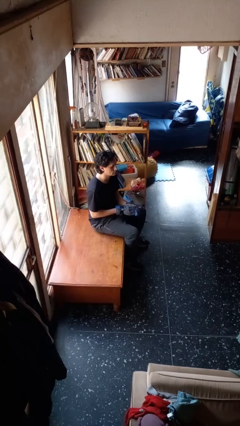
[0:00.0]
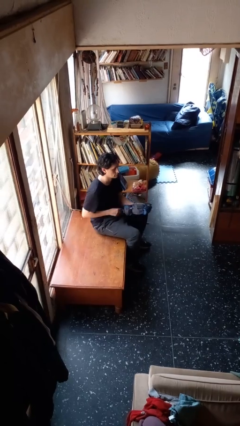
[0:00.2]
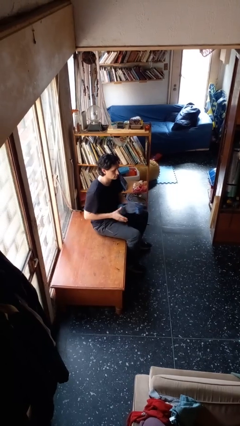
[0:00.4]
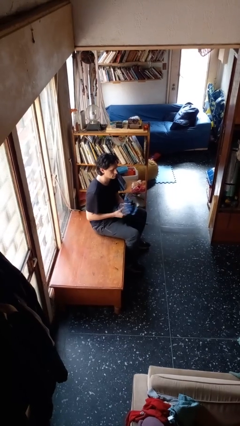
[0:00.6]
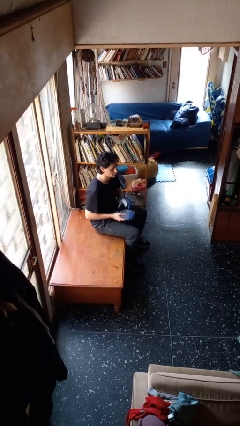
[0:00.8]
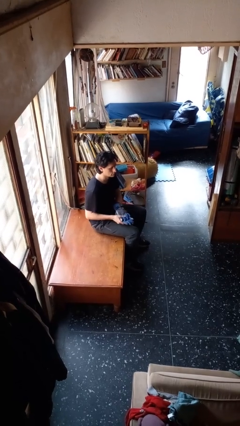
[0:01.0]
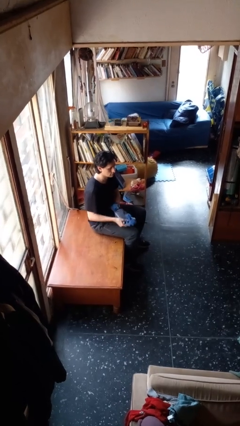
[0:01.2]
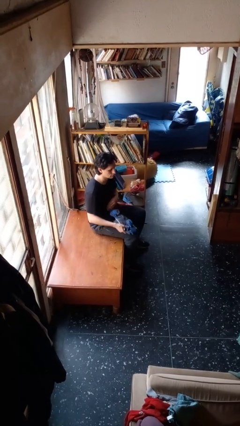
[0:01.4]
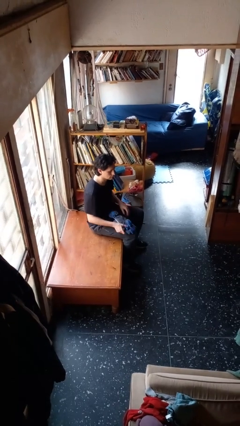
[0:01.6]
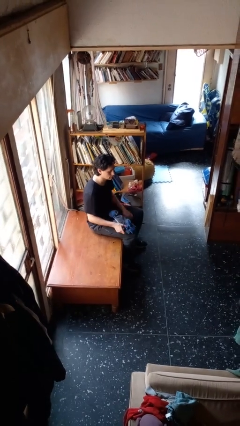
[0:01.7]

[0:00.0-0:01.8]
person takes off gloves

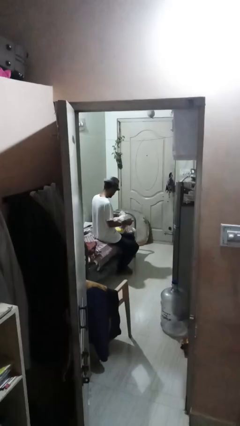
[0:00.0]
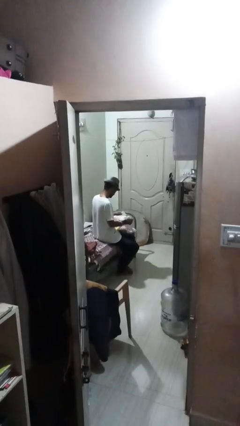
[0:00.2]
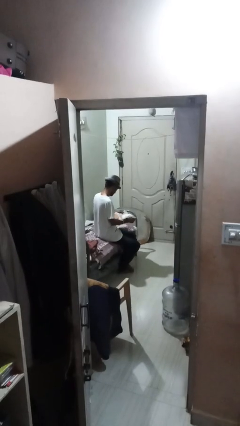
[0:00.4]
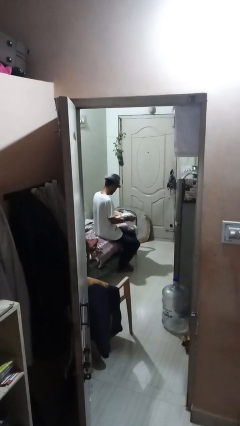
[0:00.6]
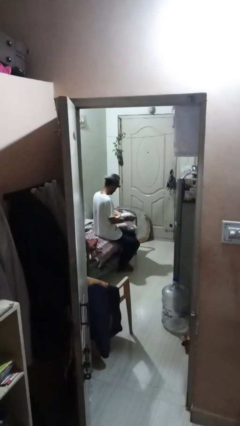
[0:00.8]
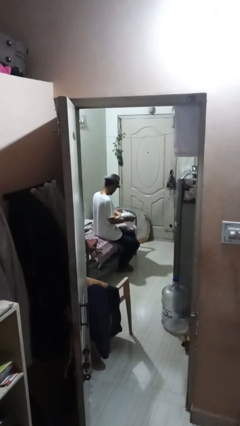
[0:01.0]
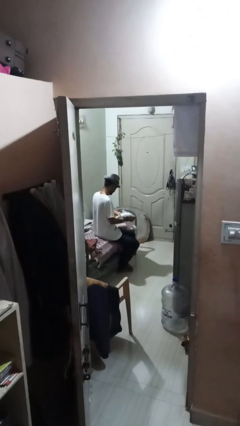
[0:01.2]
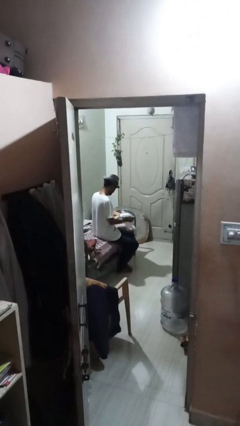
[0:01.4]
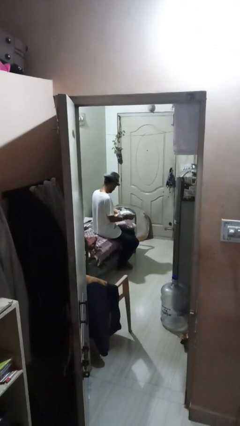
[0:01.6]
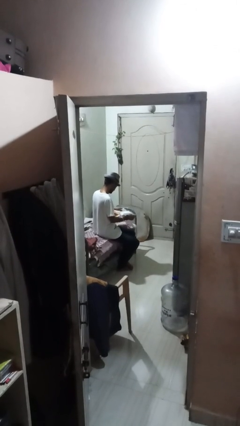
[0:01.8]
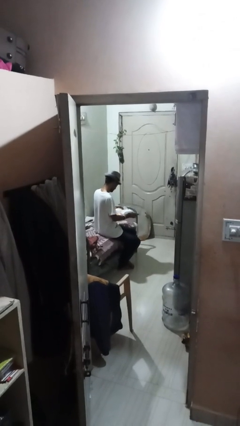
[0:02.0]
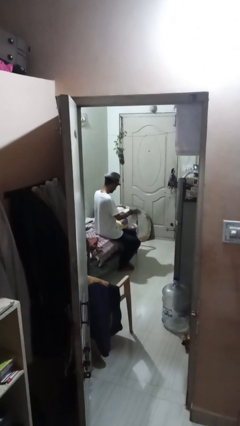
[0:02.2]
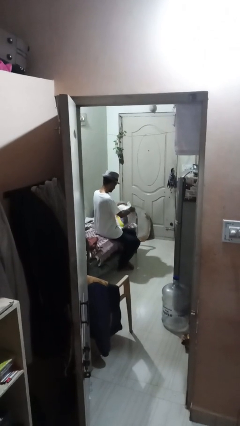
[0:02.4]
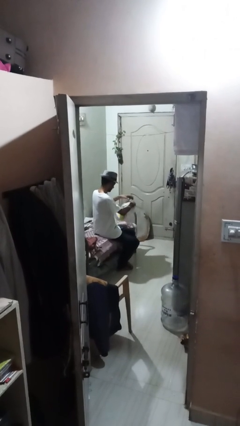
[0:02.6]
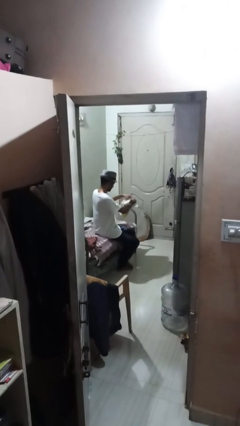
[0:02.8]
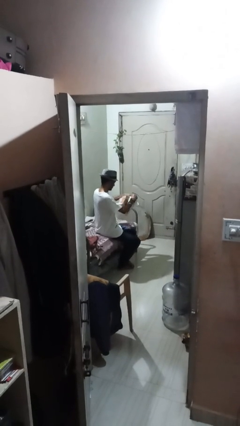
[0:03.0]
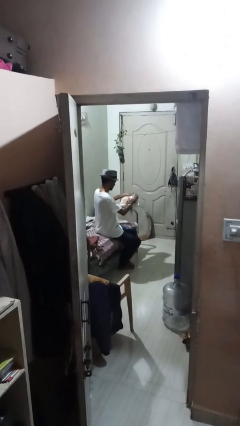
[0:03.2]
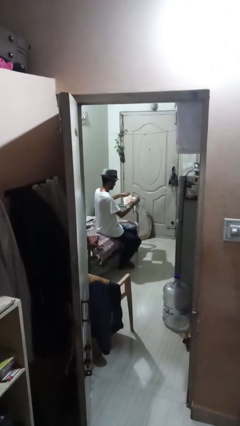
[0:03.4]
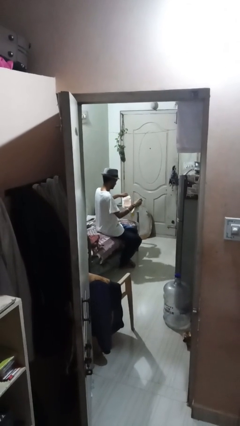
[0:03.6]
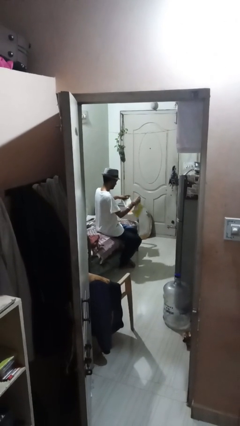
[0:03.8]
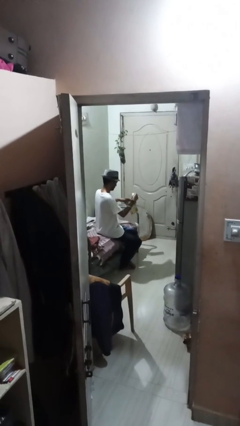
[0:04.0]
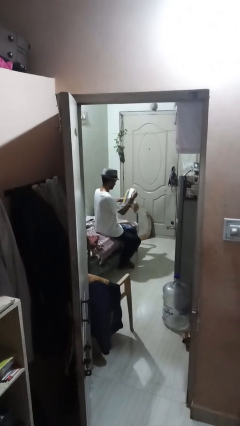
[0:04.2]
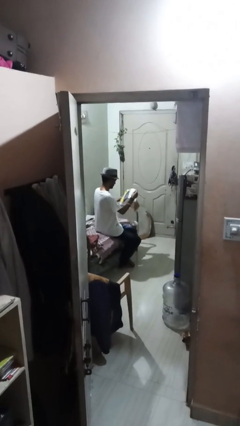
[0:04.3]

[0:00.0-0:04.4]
person tears paper

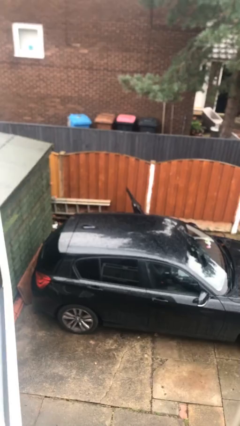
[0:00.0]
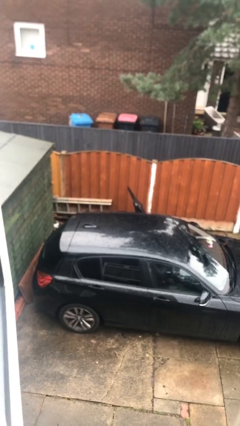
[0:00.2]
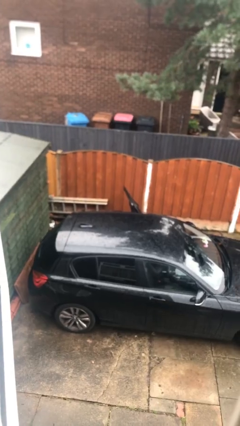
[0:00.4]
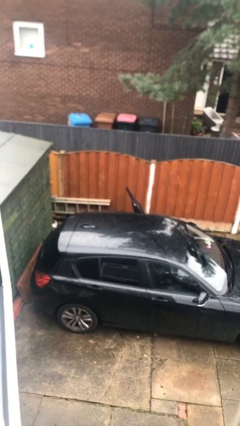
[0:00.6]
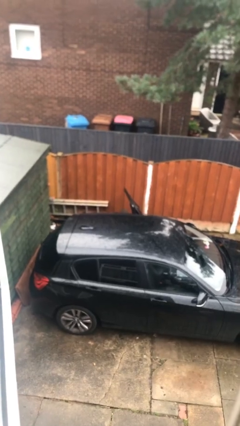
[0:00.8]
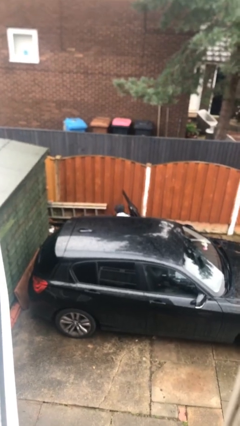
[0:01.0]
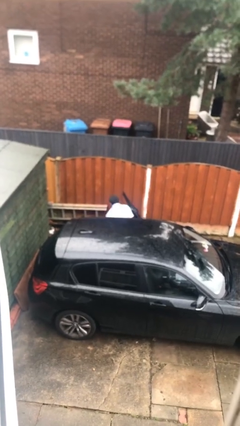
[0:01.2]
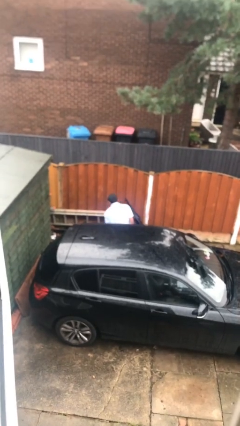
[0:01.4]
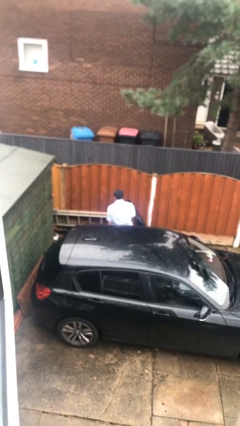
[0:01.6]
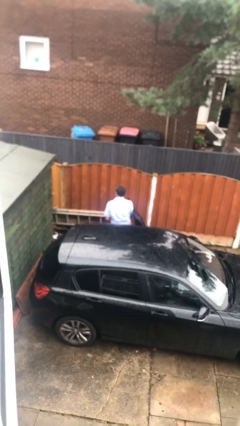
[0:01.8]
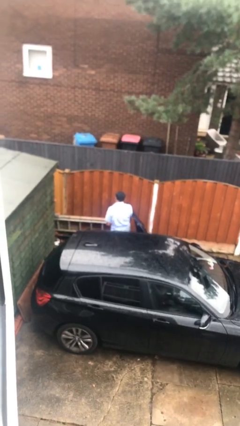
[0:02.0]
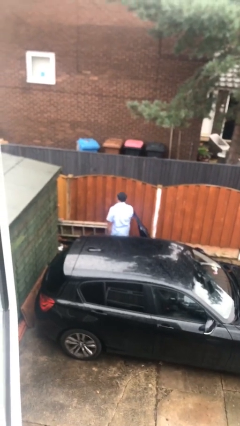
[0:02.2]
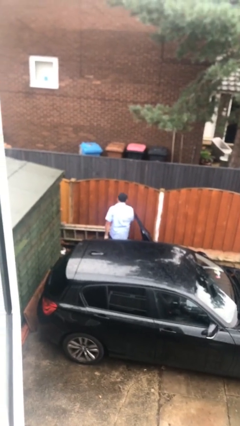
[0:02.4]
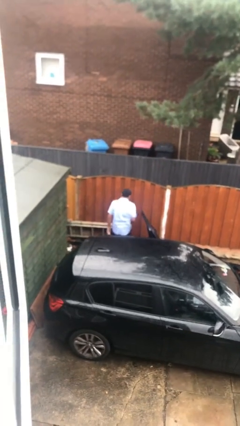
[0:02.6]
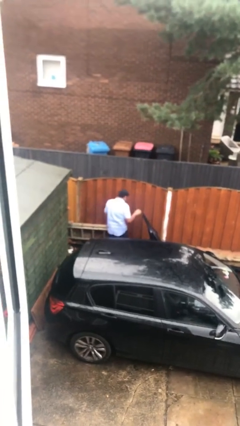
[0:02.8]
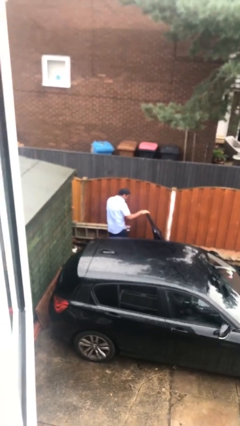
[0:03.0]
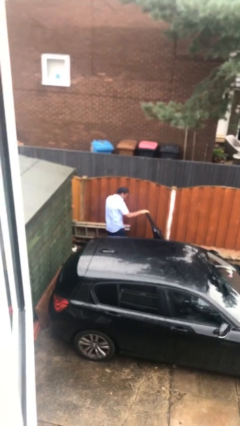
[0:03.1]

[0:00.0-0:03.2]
person exits car

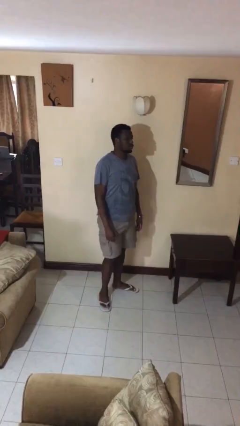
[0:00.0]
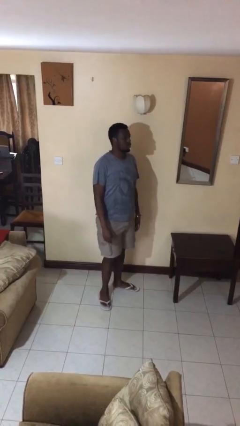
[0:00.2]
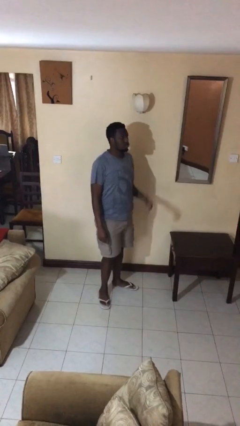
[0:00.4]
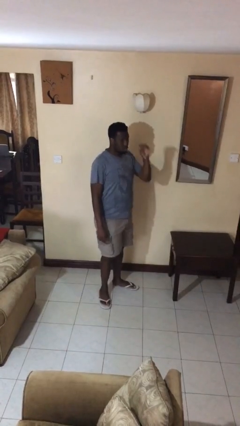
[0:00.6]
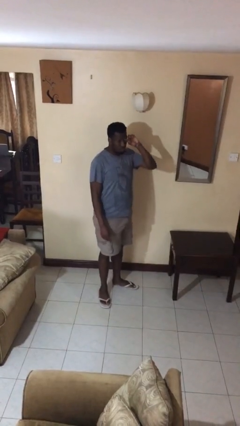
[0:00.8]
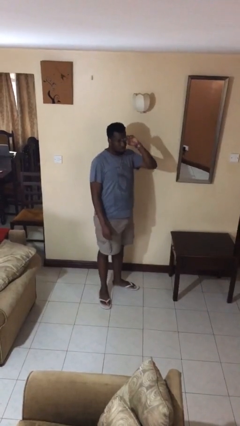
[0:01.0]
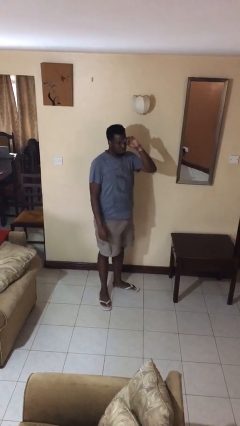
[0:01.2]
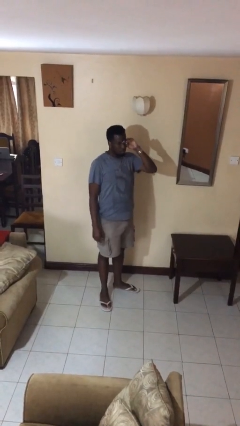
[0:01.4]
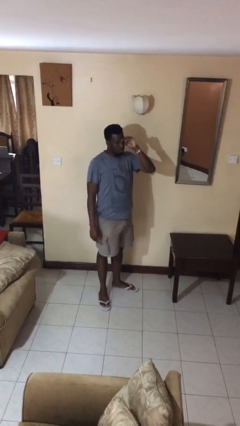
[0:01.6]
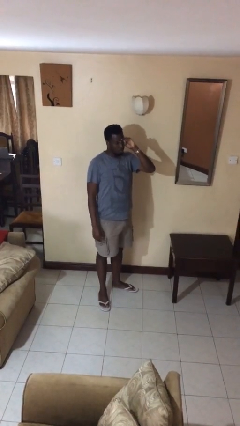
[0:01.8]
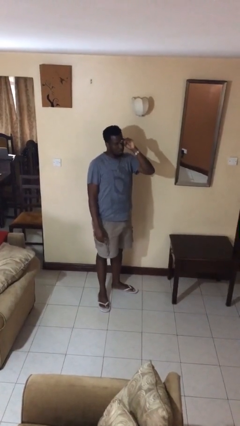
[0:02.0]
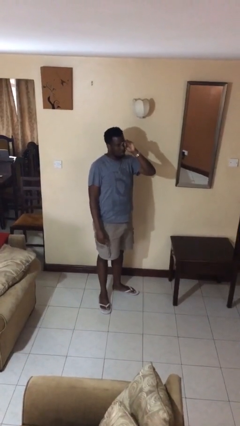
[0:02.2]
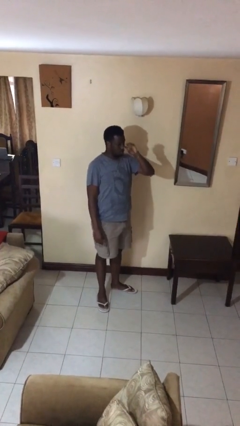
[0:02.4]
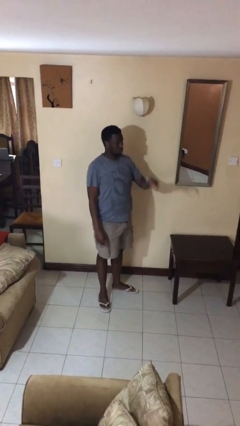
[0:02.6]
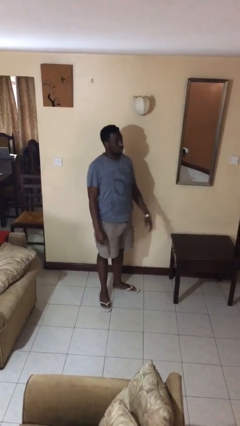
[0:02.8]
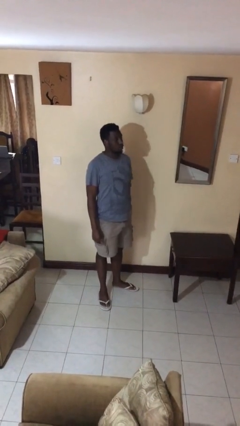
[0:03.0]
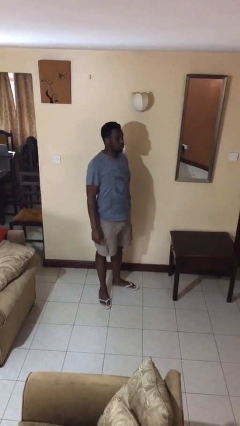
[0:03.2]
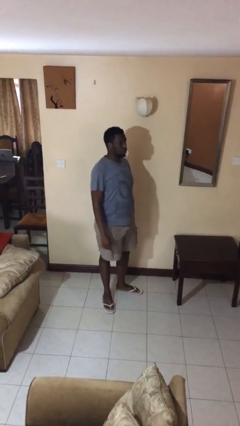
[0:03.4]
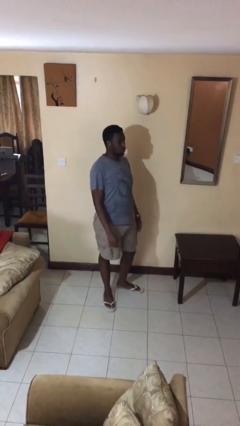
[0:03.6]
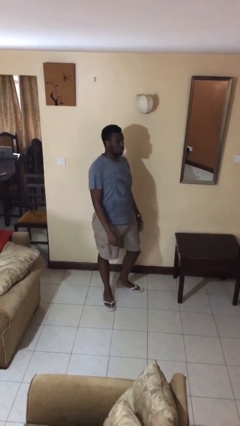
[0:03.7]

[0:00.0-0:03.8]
person rubs eyes

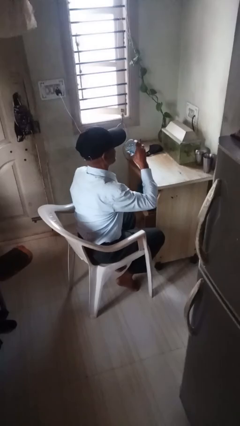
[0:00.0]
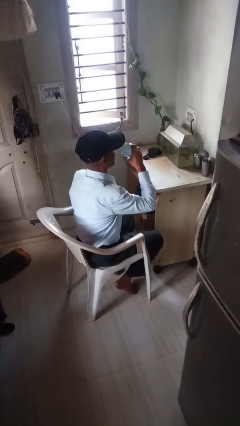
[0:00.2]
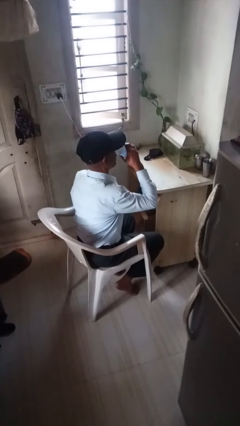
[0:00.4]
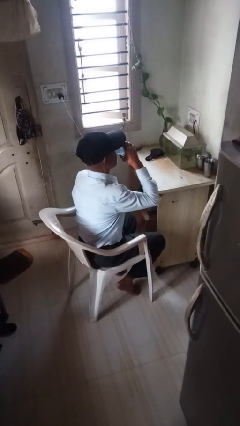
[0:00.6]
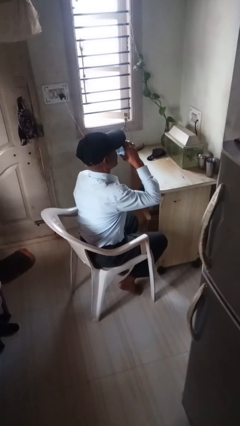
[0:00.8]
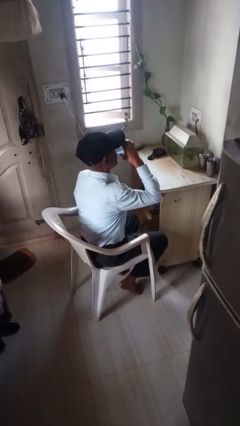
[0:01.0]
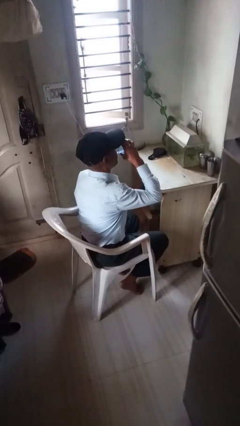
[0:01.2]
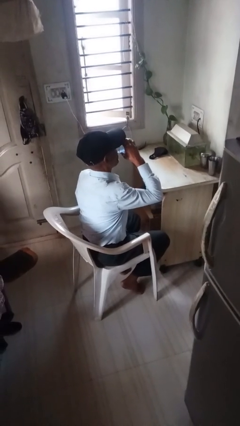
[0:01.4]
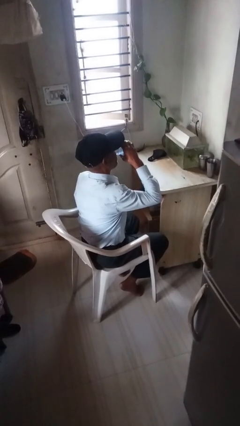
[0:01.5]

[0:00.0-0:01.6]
person drinks from shotglass

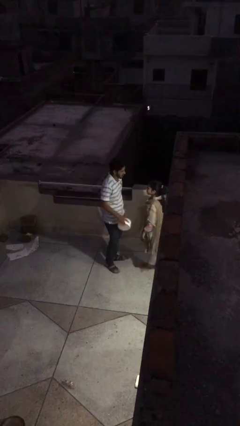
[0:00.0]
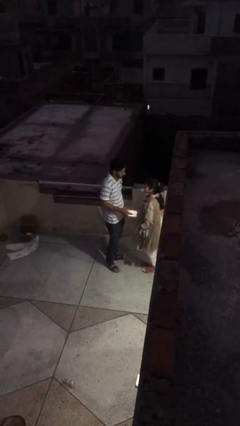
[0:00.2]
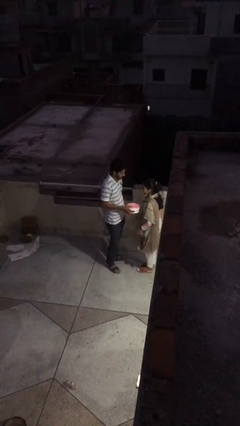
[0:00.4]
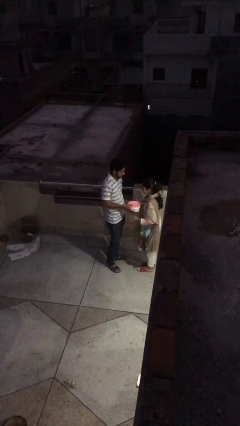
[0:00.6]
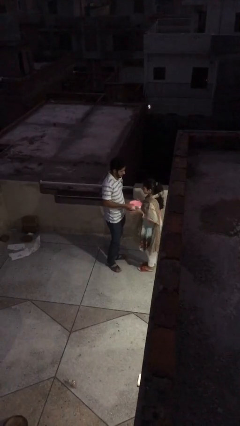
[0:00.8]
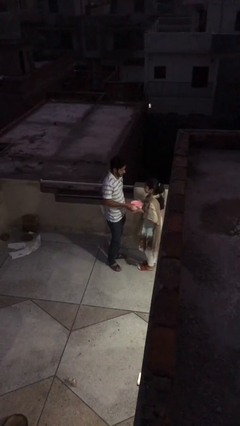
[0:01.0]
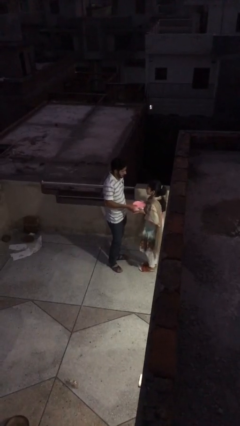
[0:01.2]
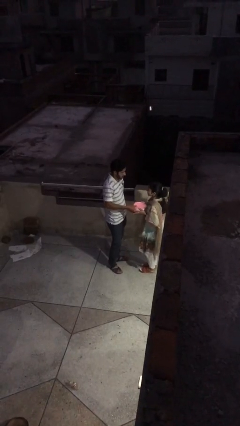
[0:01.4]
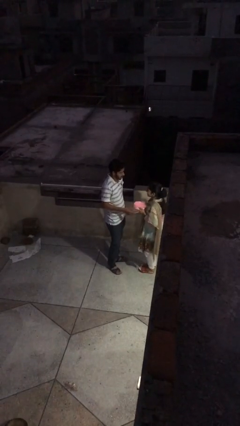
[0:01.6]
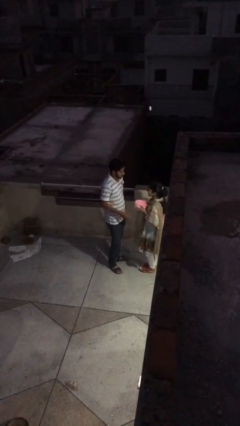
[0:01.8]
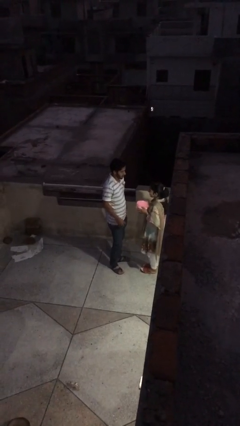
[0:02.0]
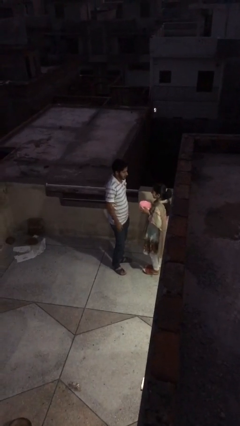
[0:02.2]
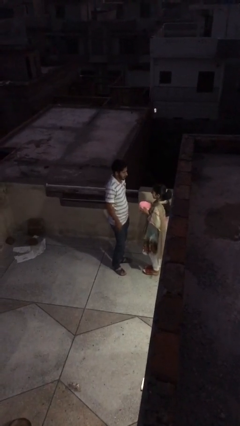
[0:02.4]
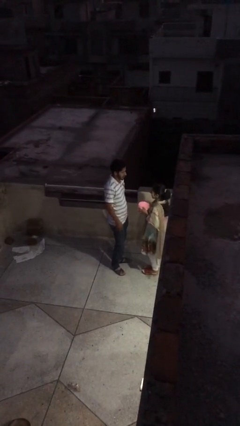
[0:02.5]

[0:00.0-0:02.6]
person transfers object to person

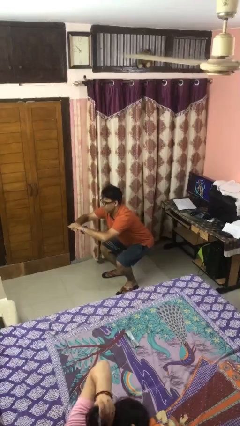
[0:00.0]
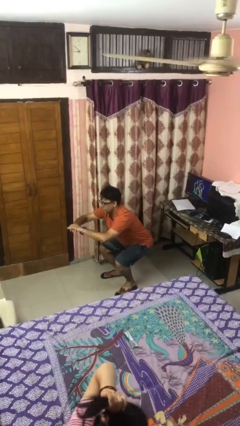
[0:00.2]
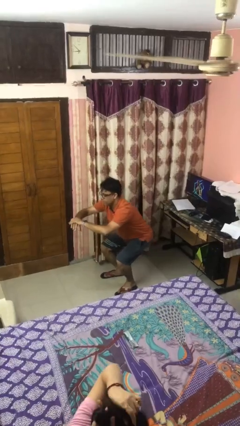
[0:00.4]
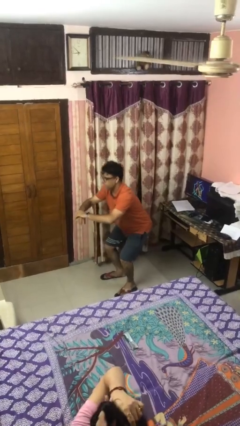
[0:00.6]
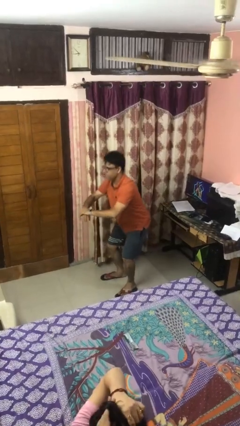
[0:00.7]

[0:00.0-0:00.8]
person stands up
